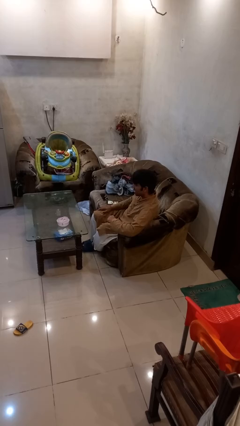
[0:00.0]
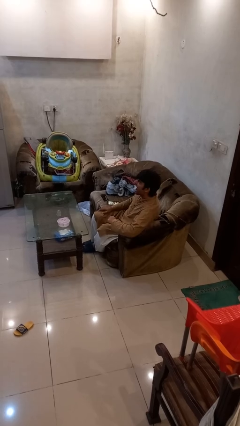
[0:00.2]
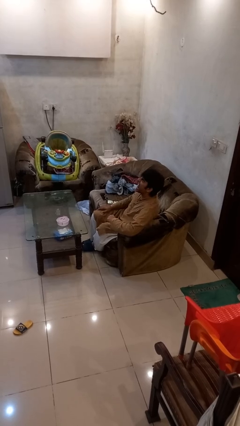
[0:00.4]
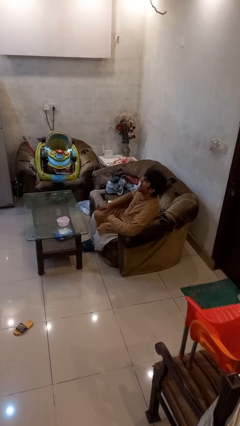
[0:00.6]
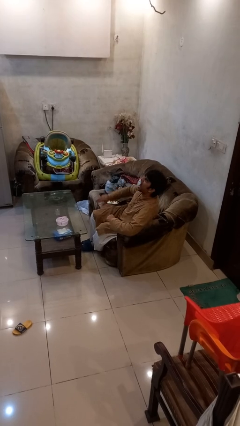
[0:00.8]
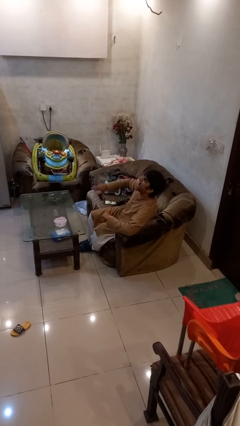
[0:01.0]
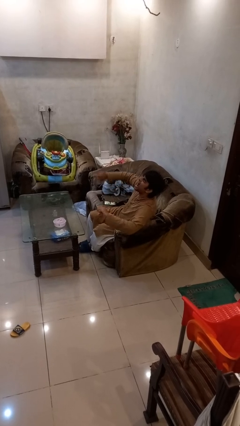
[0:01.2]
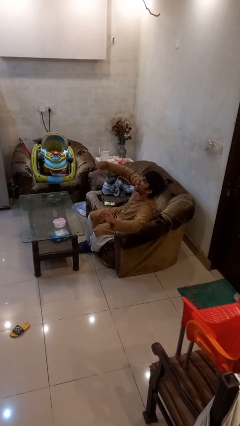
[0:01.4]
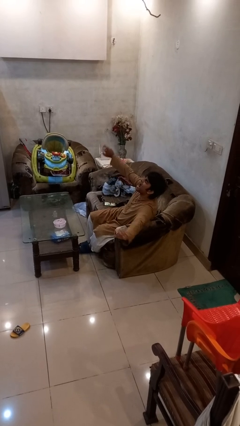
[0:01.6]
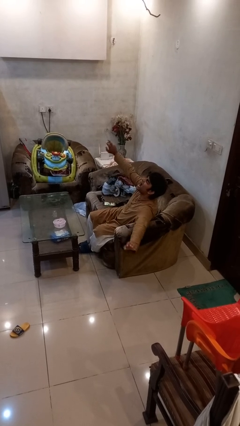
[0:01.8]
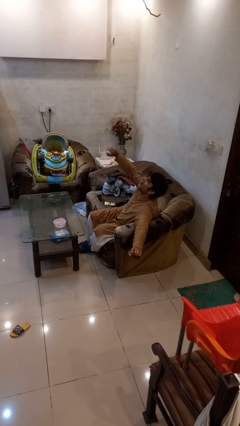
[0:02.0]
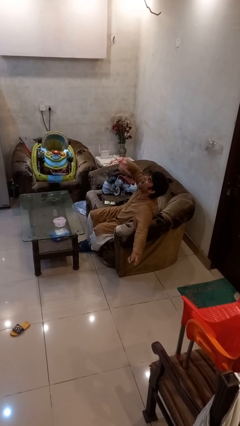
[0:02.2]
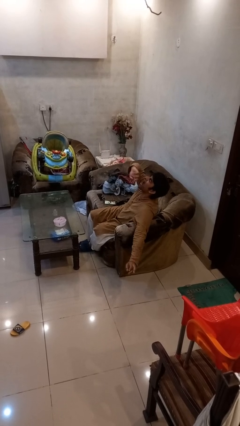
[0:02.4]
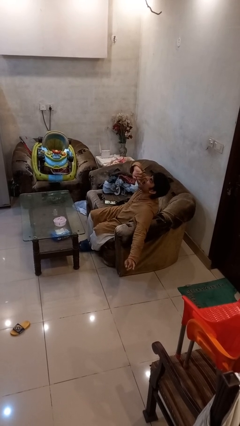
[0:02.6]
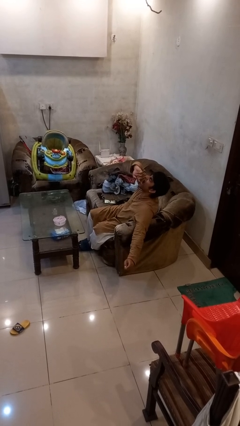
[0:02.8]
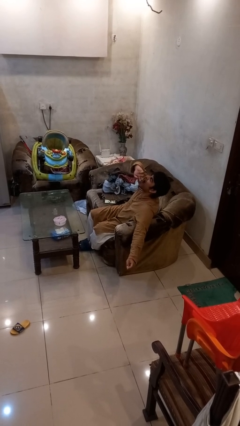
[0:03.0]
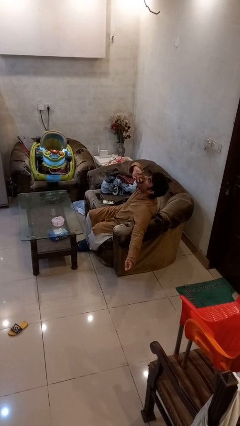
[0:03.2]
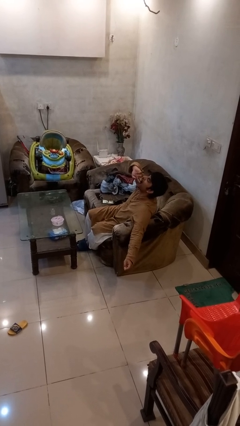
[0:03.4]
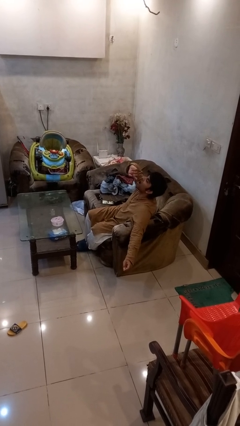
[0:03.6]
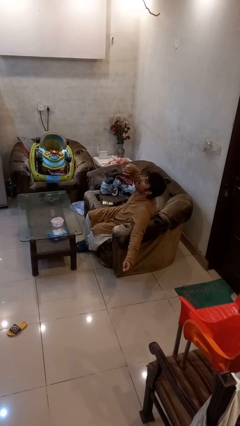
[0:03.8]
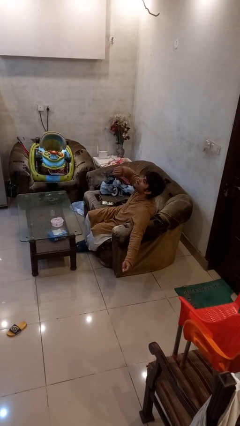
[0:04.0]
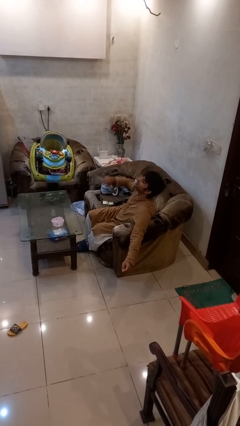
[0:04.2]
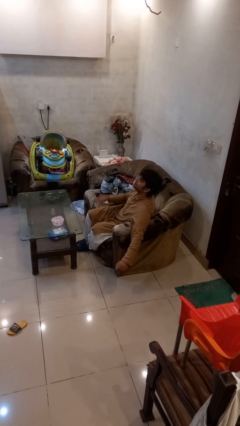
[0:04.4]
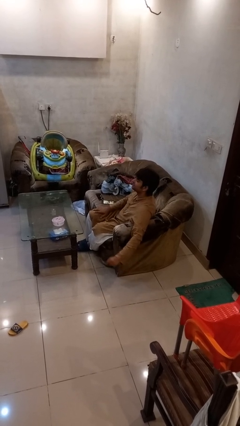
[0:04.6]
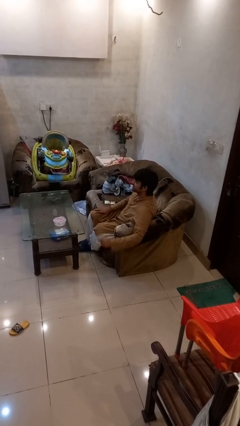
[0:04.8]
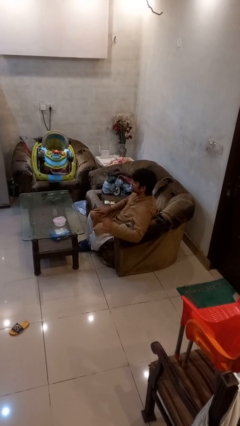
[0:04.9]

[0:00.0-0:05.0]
person yawns

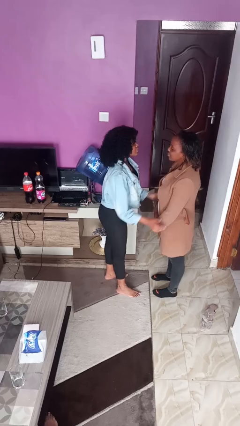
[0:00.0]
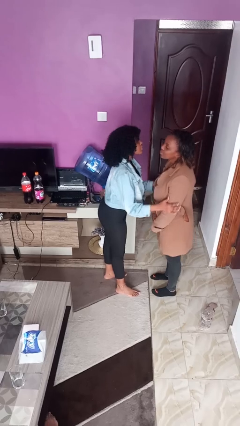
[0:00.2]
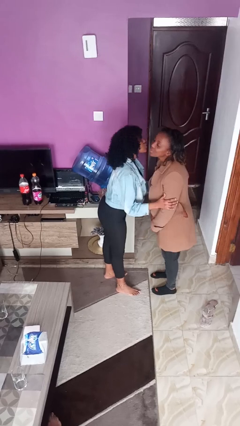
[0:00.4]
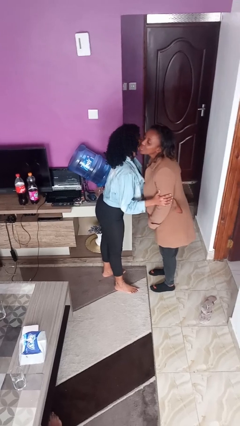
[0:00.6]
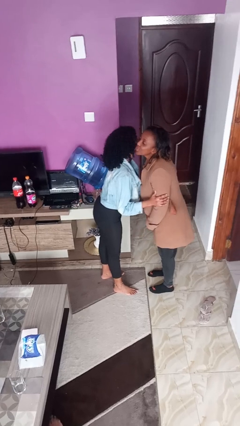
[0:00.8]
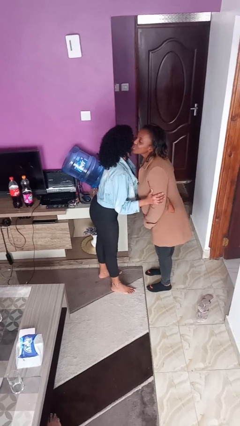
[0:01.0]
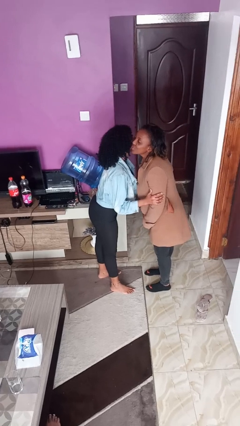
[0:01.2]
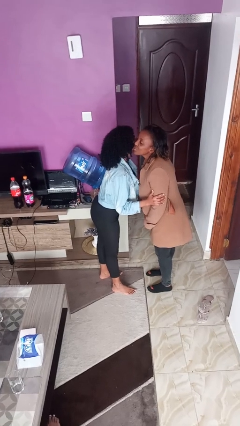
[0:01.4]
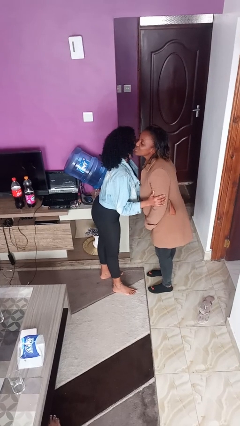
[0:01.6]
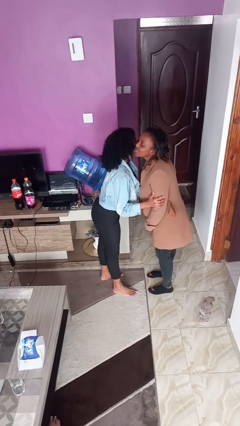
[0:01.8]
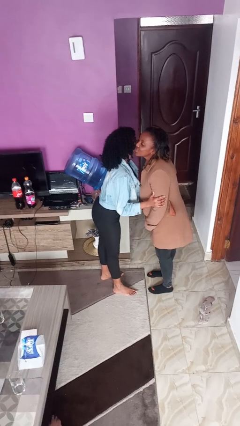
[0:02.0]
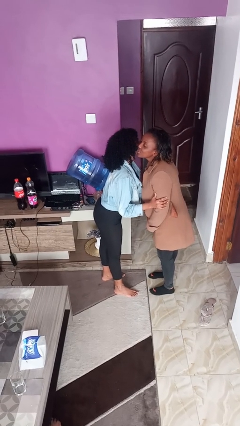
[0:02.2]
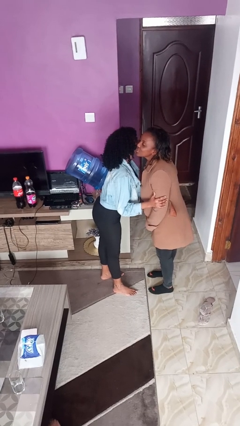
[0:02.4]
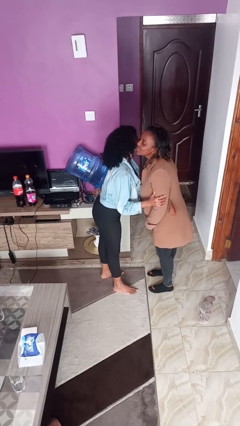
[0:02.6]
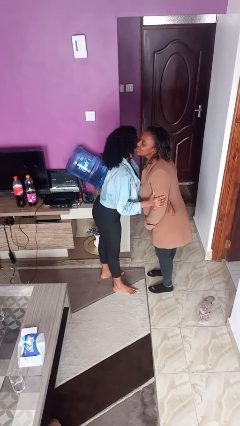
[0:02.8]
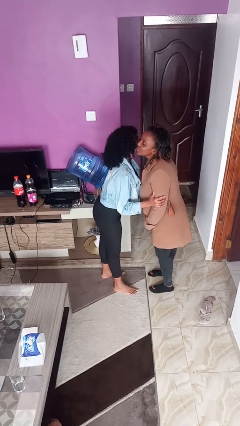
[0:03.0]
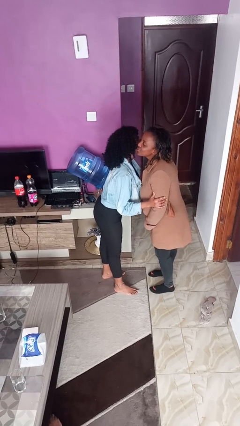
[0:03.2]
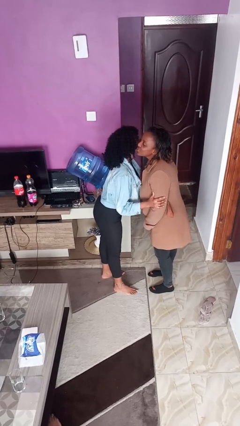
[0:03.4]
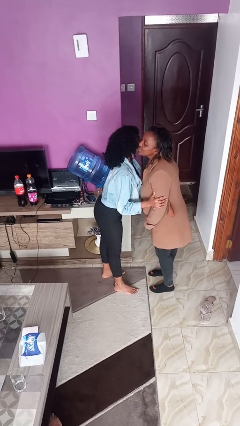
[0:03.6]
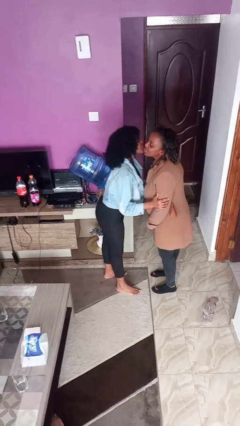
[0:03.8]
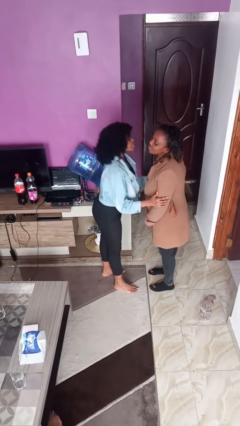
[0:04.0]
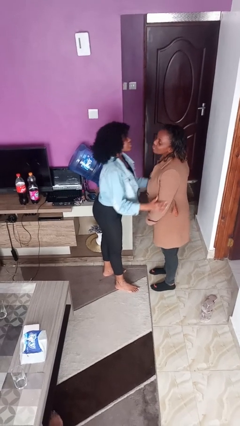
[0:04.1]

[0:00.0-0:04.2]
person kisses cheek of person

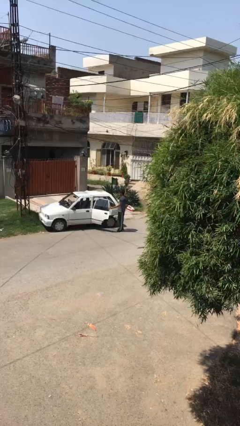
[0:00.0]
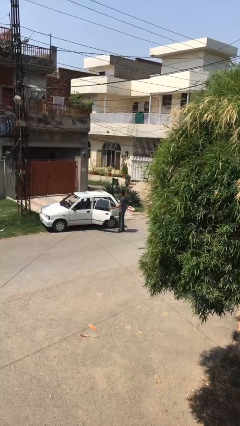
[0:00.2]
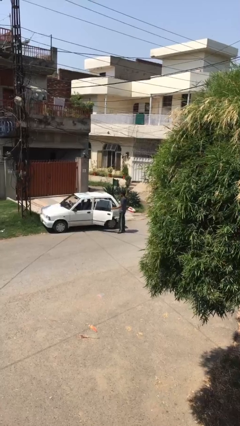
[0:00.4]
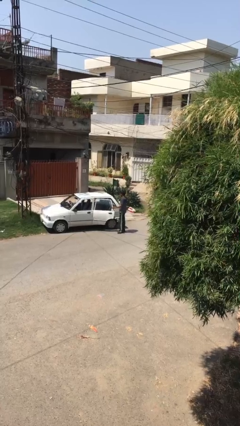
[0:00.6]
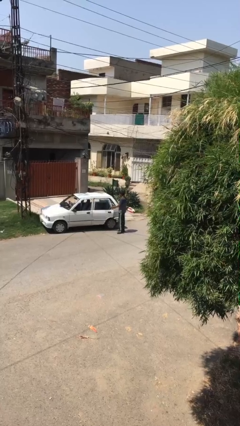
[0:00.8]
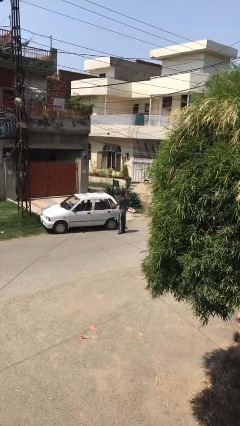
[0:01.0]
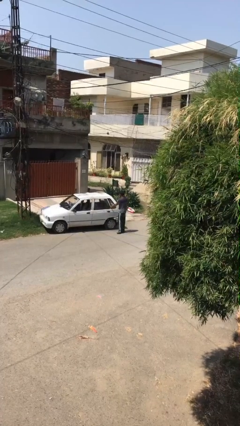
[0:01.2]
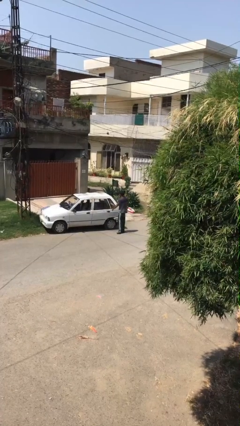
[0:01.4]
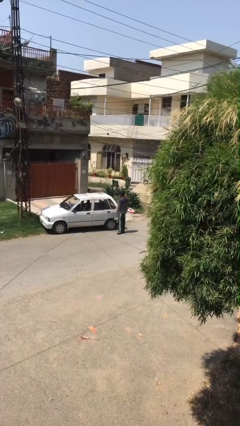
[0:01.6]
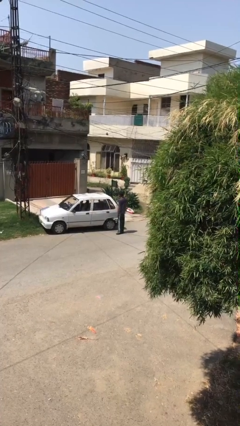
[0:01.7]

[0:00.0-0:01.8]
person closes car door

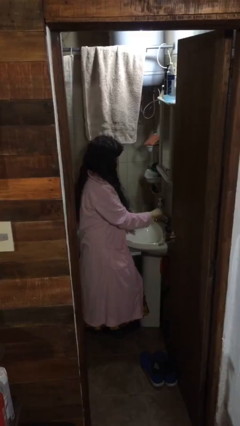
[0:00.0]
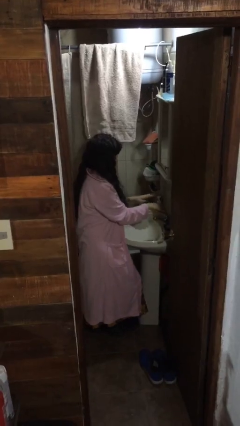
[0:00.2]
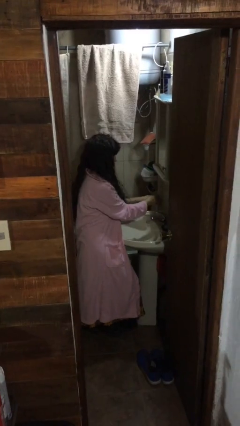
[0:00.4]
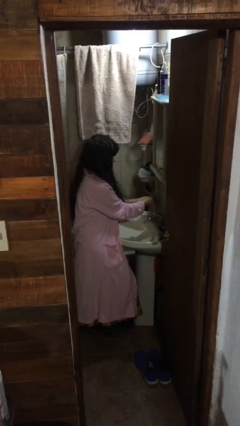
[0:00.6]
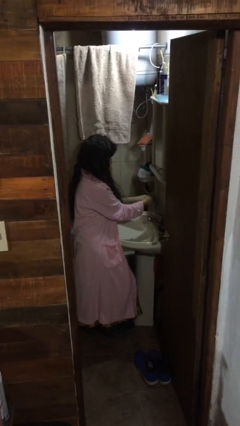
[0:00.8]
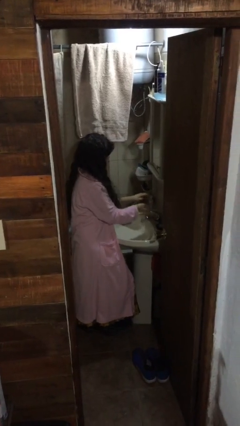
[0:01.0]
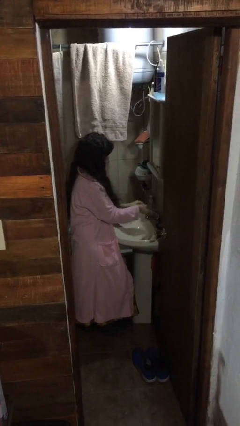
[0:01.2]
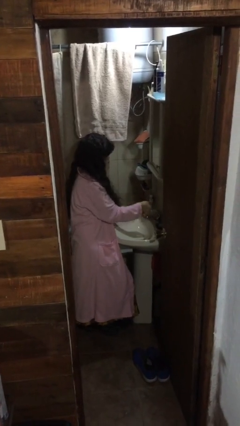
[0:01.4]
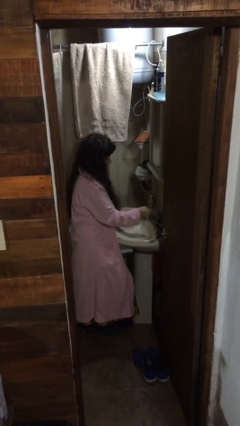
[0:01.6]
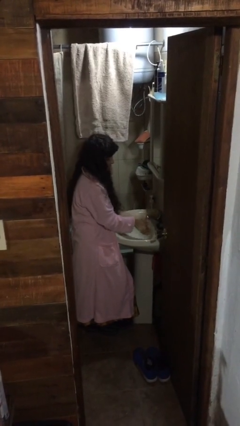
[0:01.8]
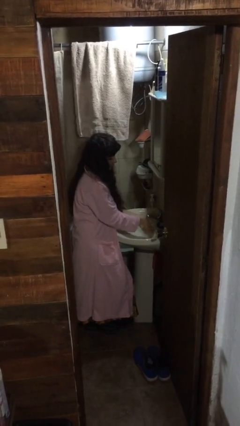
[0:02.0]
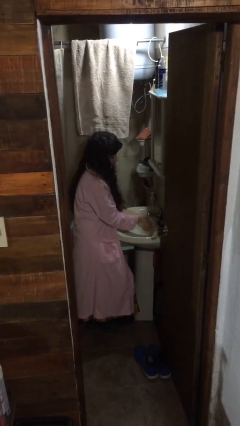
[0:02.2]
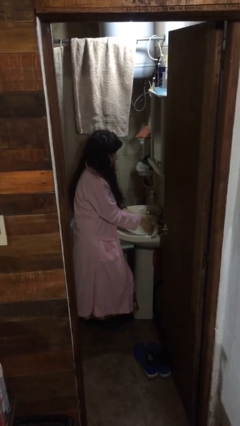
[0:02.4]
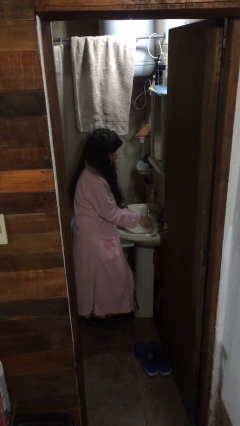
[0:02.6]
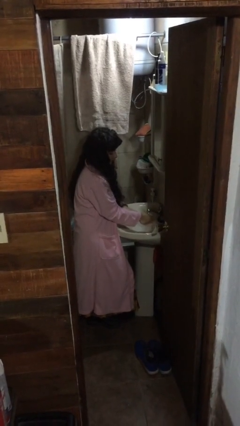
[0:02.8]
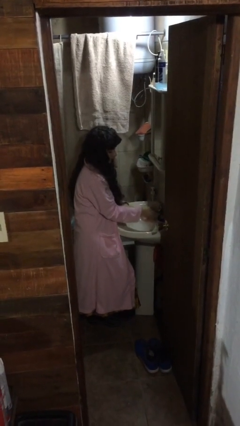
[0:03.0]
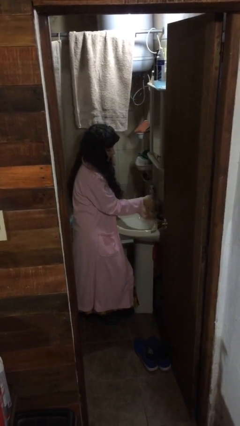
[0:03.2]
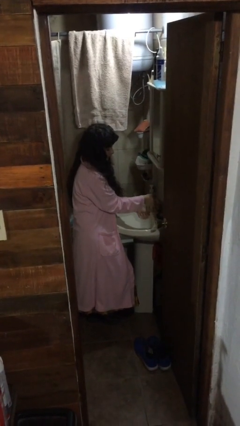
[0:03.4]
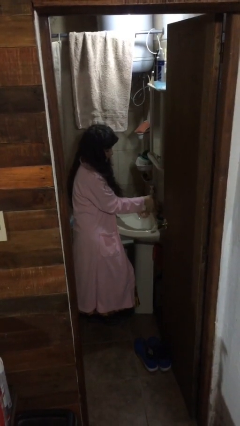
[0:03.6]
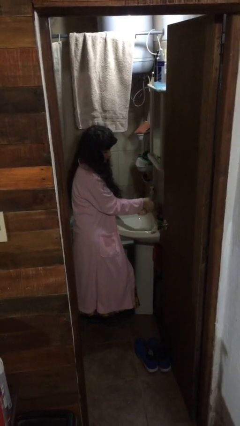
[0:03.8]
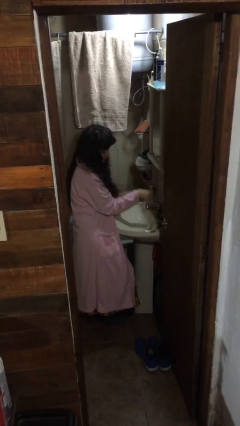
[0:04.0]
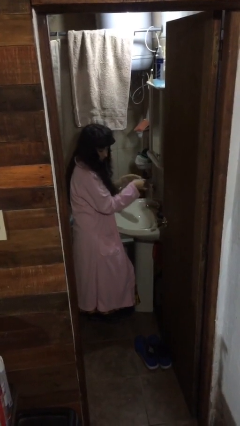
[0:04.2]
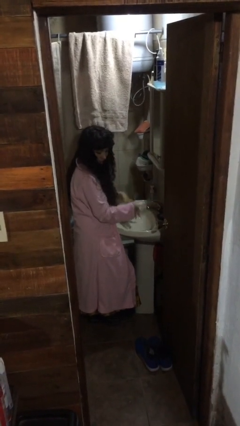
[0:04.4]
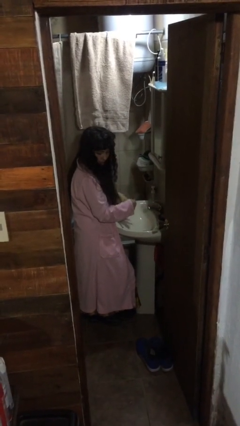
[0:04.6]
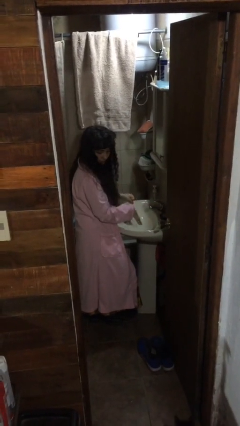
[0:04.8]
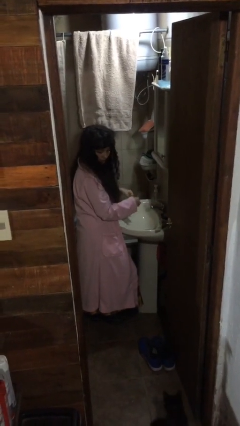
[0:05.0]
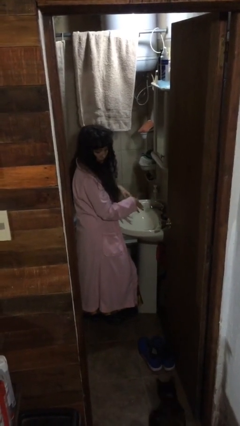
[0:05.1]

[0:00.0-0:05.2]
person washes hands

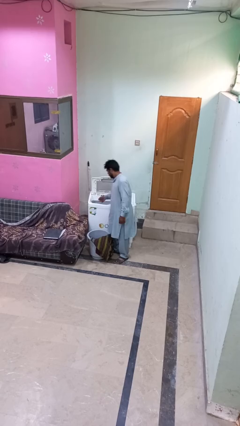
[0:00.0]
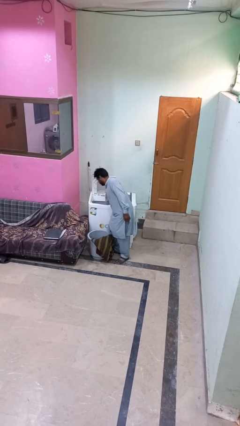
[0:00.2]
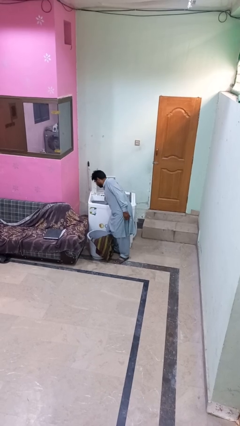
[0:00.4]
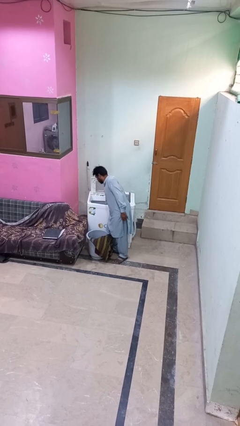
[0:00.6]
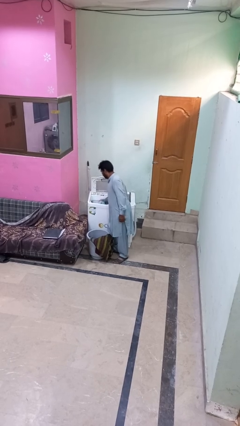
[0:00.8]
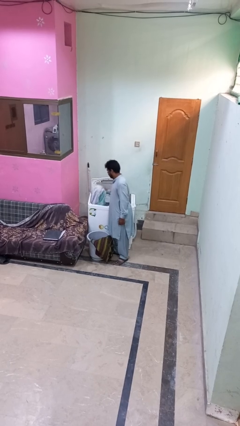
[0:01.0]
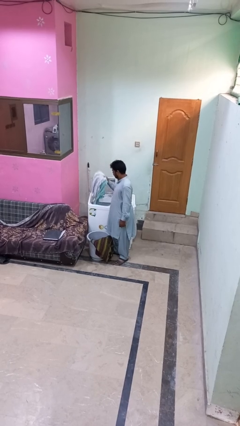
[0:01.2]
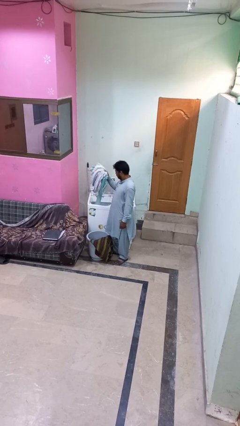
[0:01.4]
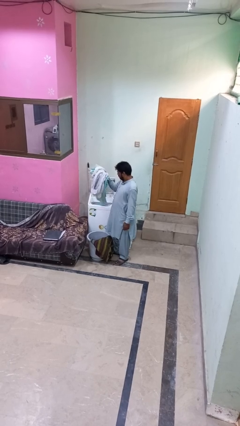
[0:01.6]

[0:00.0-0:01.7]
person unloads clotheswasher
